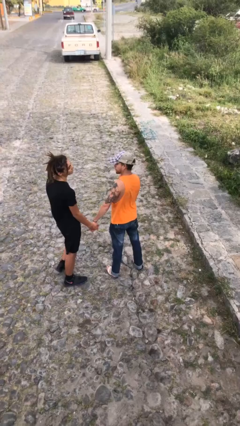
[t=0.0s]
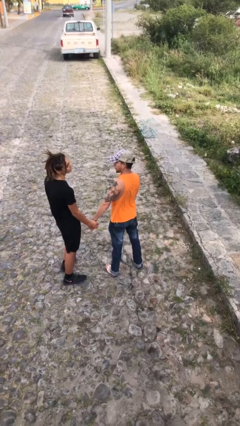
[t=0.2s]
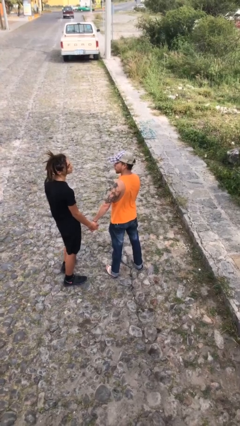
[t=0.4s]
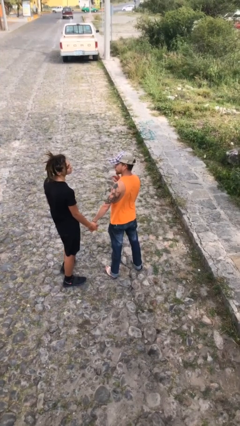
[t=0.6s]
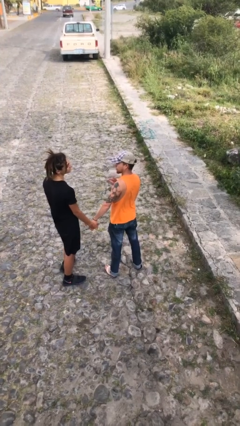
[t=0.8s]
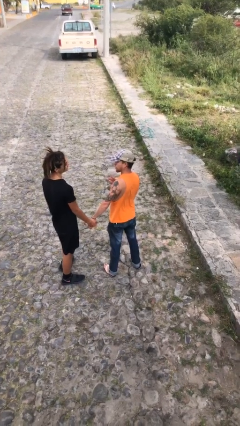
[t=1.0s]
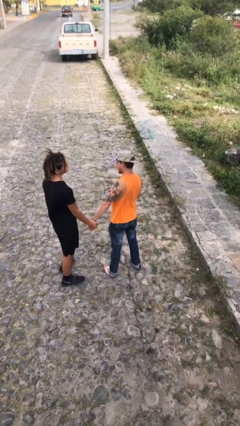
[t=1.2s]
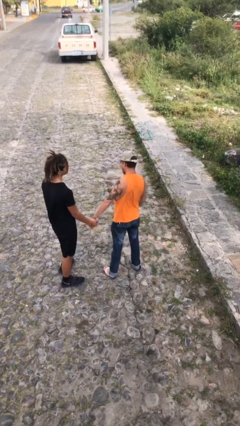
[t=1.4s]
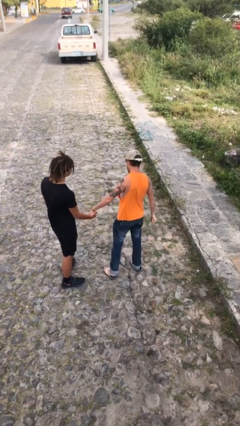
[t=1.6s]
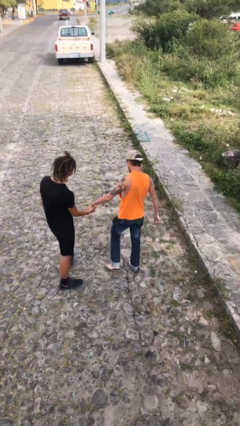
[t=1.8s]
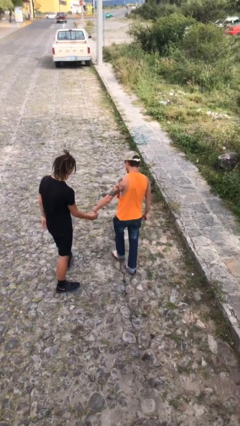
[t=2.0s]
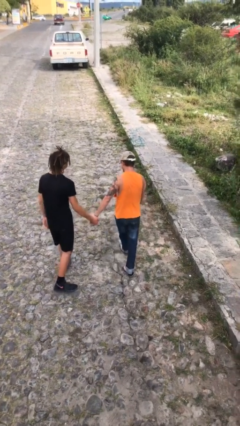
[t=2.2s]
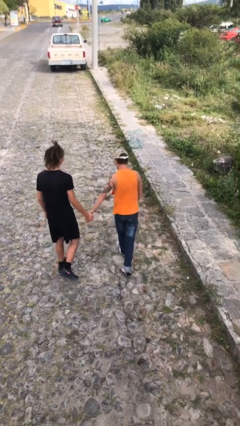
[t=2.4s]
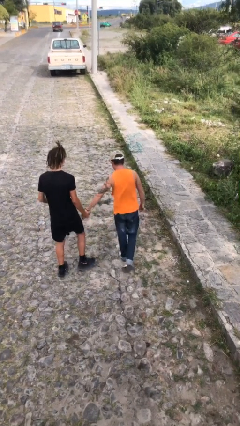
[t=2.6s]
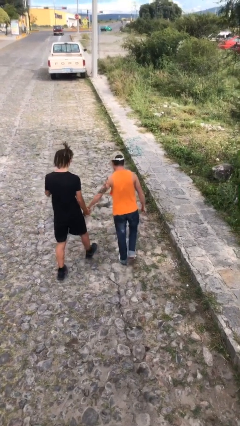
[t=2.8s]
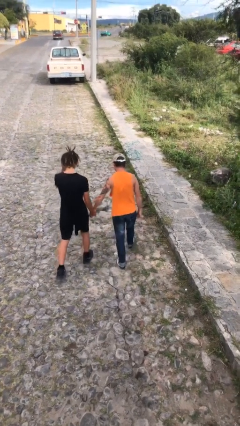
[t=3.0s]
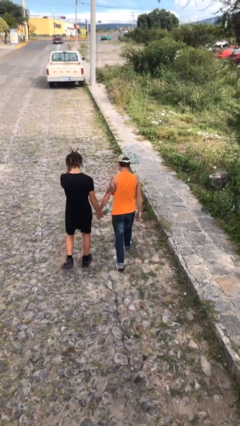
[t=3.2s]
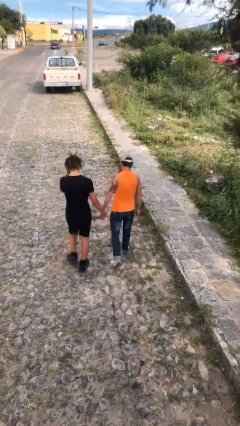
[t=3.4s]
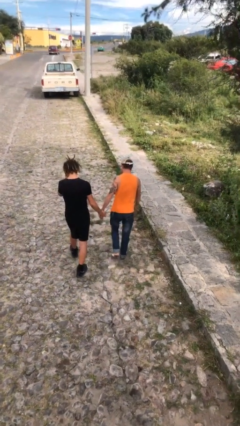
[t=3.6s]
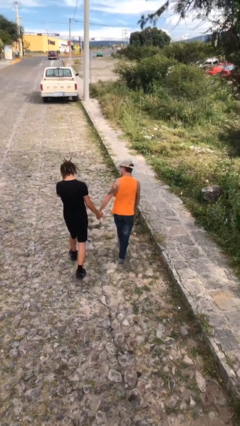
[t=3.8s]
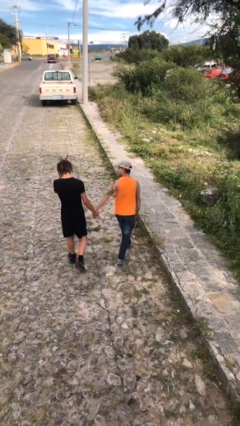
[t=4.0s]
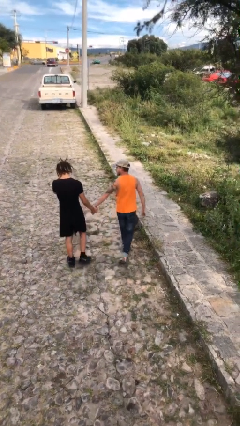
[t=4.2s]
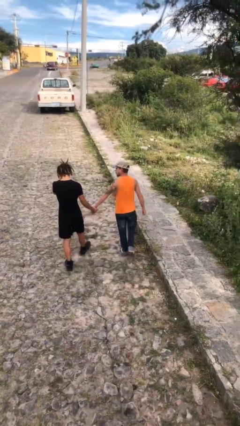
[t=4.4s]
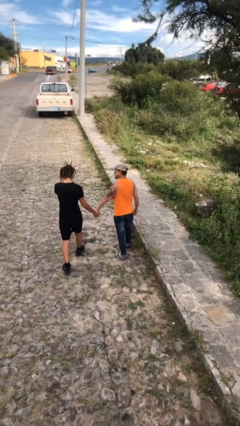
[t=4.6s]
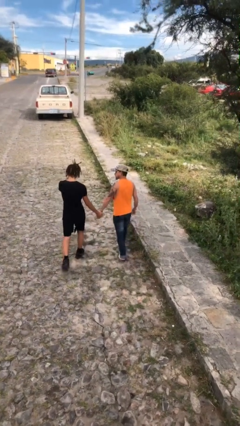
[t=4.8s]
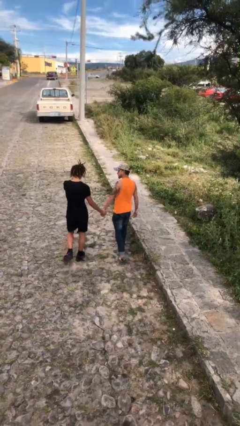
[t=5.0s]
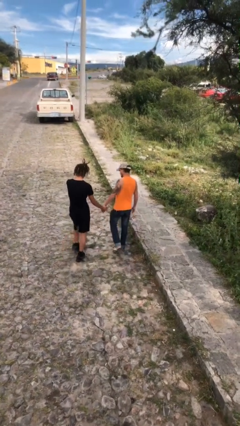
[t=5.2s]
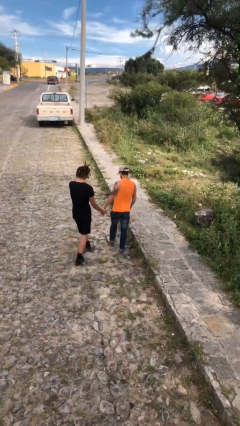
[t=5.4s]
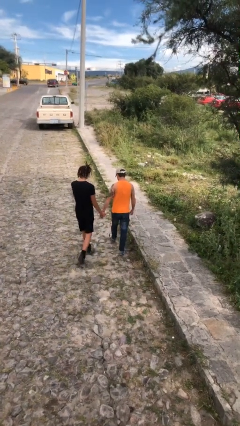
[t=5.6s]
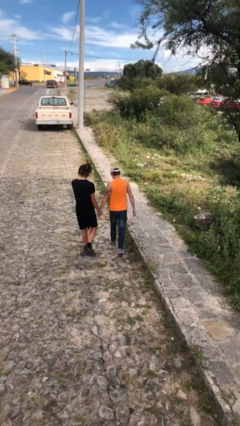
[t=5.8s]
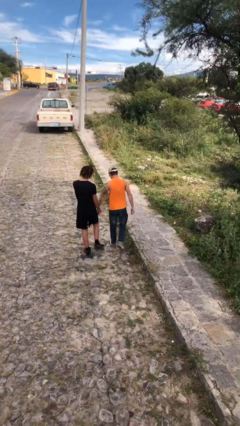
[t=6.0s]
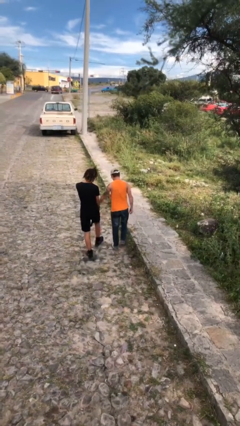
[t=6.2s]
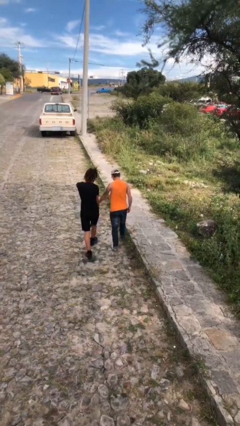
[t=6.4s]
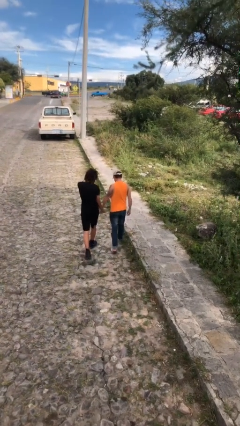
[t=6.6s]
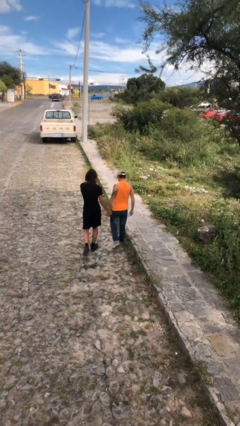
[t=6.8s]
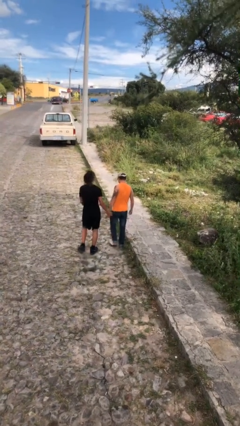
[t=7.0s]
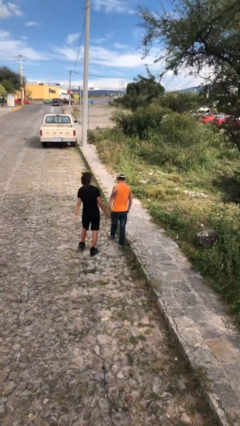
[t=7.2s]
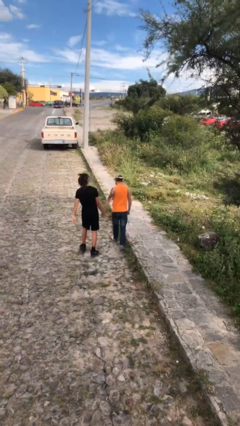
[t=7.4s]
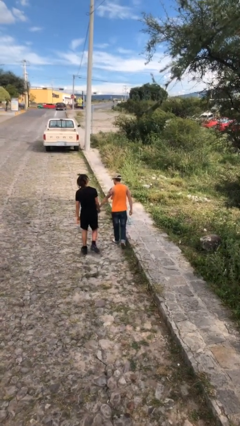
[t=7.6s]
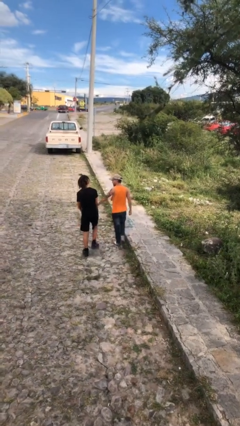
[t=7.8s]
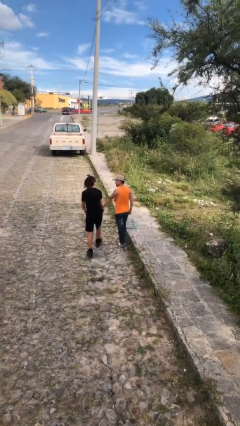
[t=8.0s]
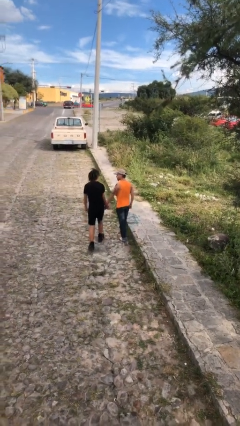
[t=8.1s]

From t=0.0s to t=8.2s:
person holds hand

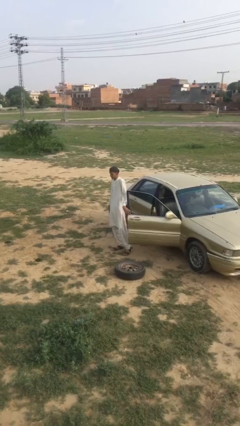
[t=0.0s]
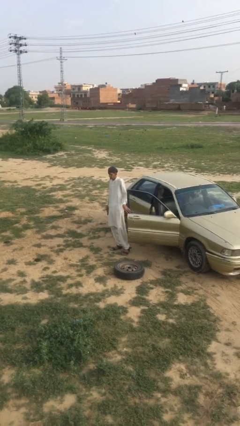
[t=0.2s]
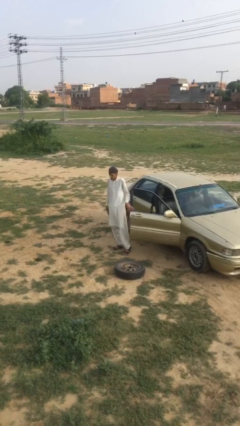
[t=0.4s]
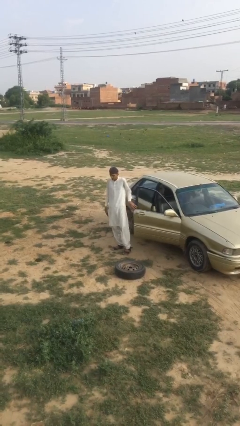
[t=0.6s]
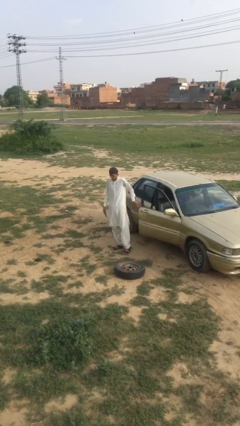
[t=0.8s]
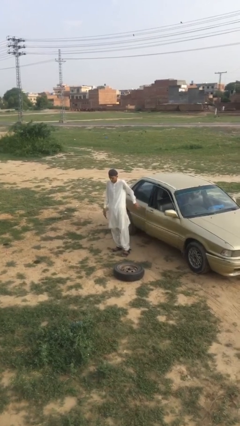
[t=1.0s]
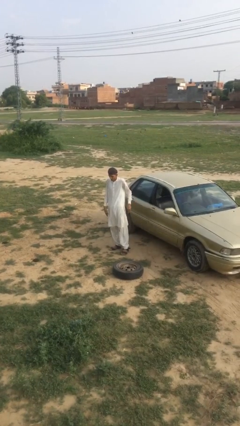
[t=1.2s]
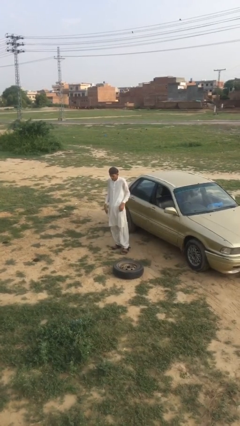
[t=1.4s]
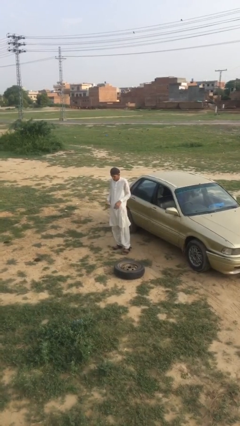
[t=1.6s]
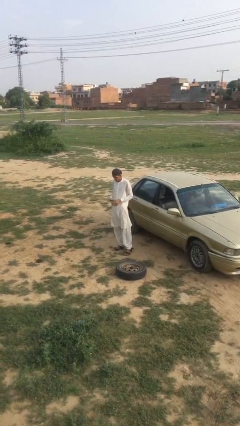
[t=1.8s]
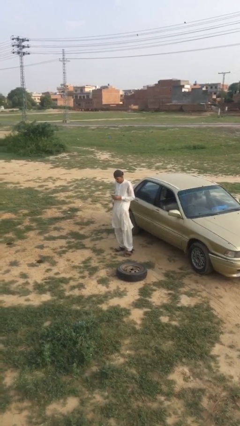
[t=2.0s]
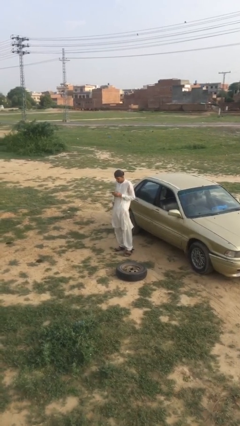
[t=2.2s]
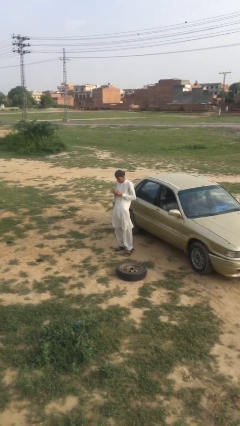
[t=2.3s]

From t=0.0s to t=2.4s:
person closes car door

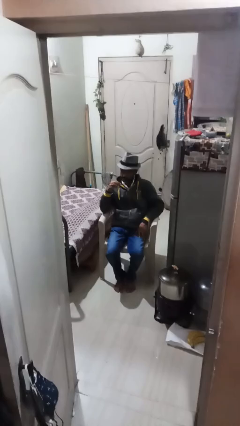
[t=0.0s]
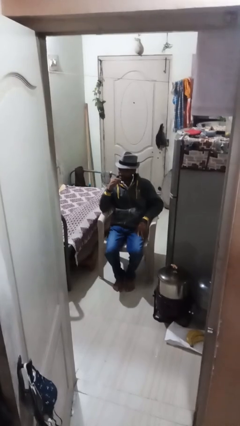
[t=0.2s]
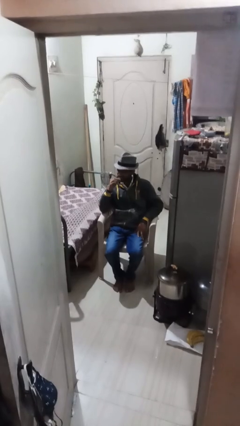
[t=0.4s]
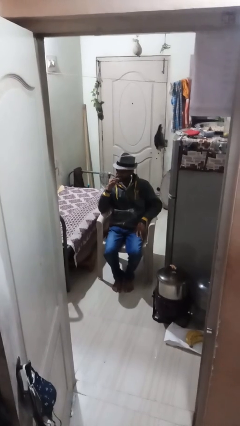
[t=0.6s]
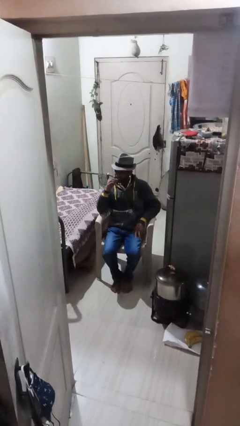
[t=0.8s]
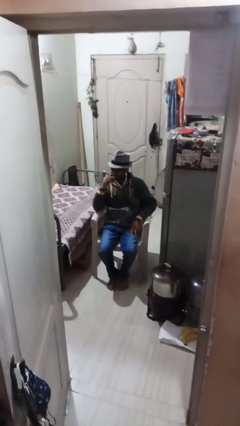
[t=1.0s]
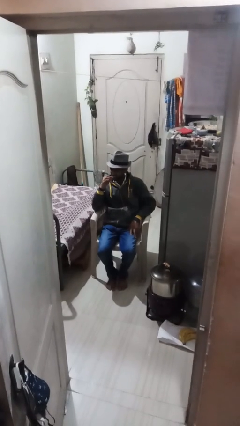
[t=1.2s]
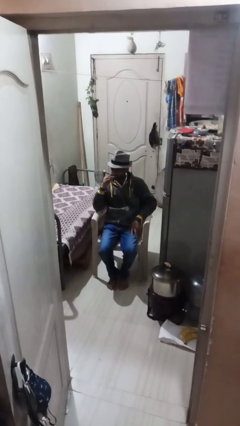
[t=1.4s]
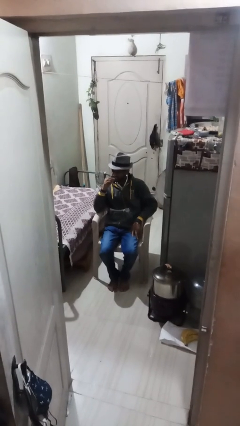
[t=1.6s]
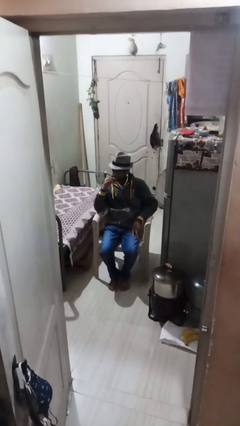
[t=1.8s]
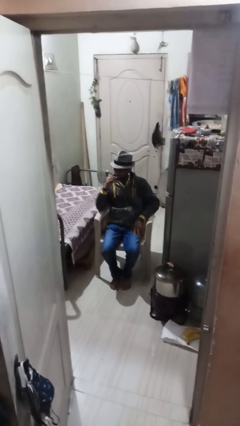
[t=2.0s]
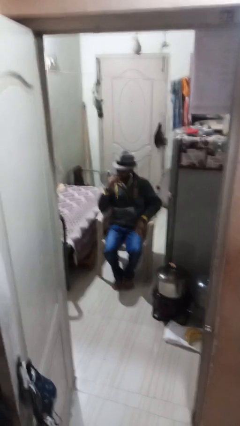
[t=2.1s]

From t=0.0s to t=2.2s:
person flosses

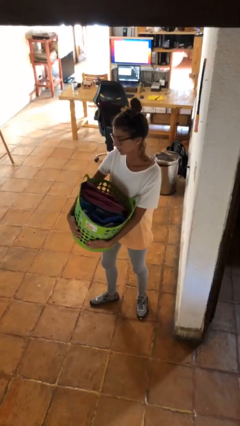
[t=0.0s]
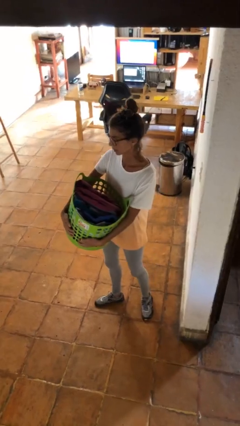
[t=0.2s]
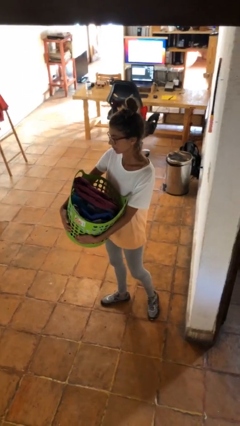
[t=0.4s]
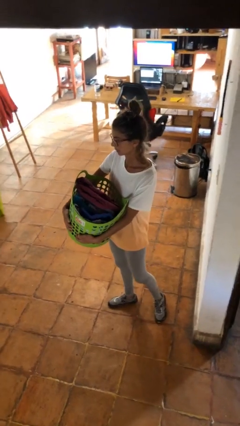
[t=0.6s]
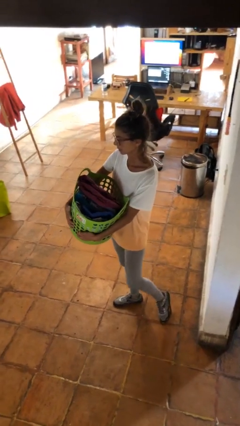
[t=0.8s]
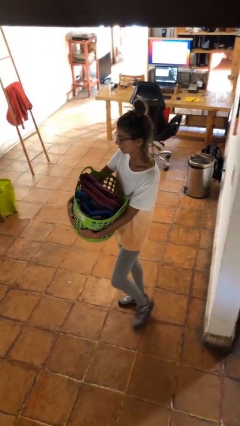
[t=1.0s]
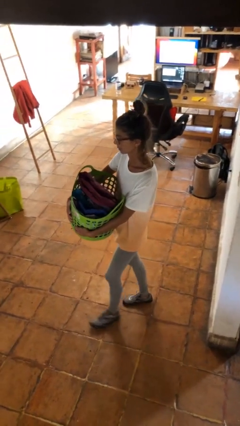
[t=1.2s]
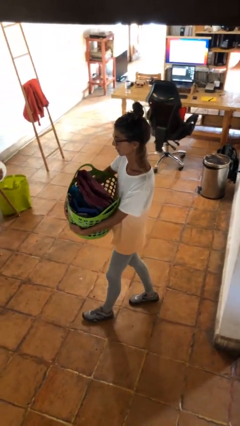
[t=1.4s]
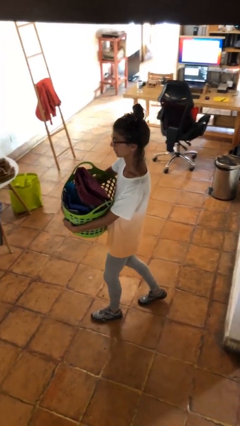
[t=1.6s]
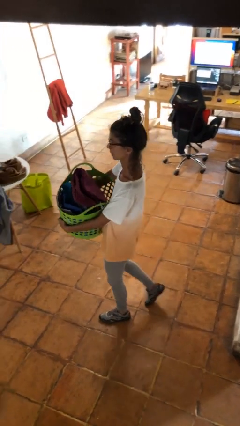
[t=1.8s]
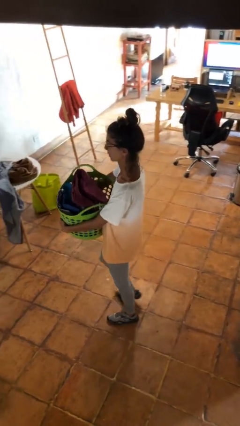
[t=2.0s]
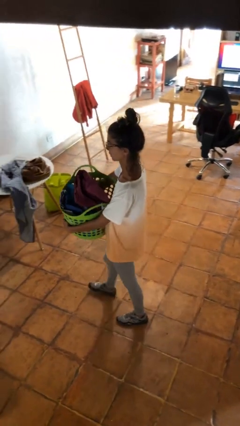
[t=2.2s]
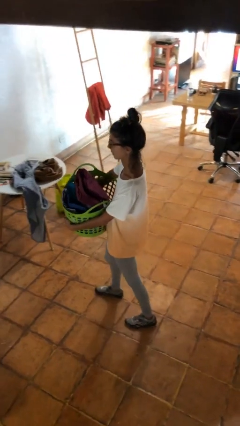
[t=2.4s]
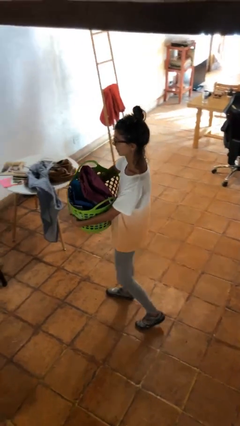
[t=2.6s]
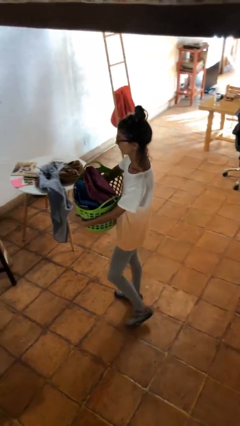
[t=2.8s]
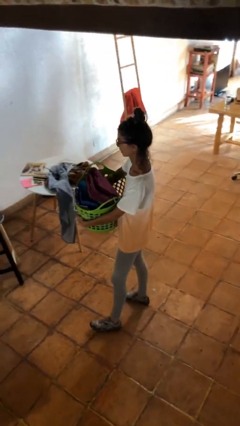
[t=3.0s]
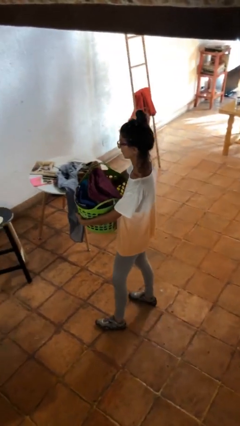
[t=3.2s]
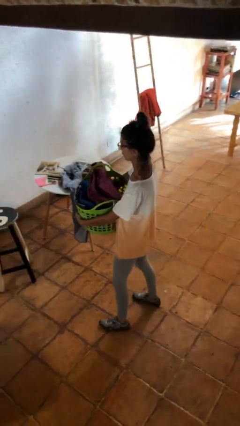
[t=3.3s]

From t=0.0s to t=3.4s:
person carries laundry basket

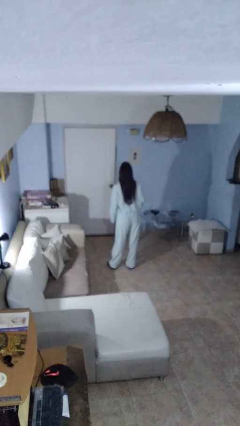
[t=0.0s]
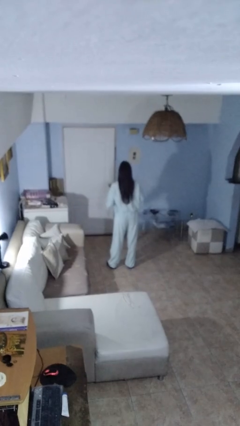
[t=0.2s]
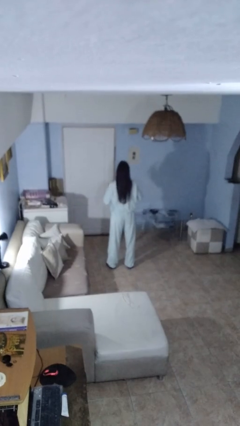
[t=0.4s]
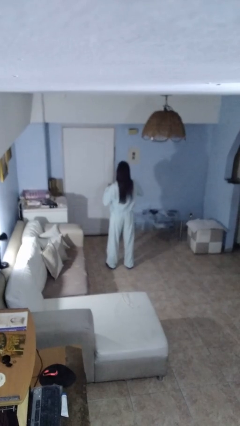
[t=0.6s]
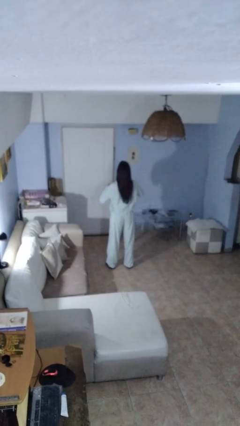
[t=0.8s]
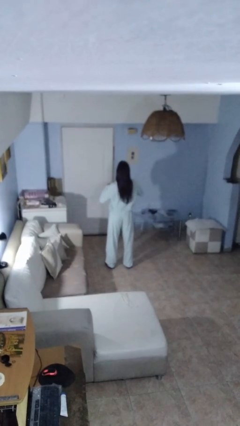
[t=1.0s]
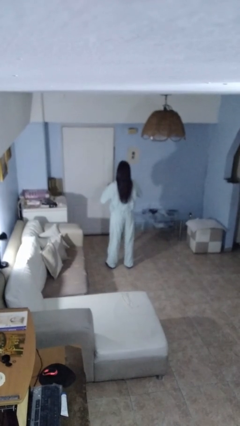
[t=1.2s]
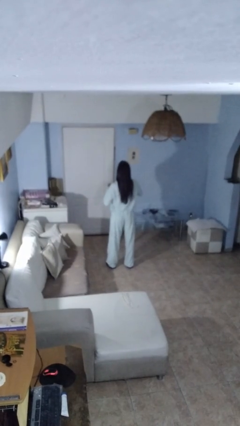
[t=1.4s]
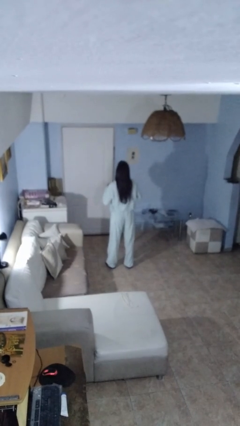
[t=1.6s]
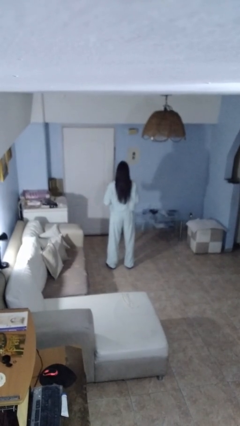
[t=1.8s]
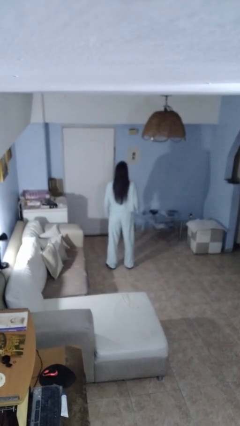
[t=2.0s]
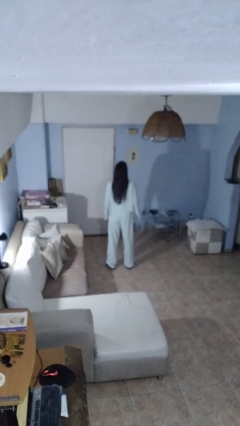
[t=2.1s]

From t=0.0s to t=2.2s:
person drums on chest
